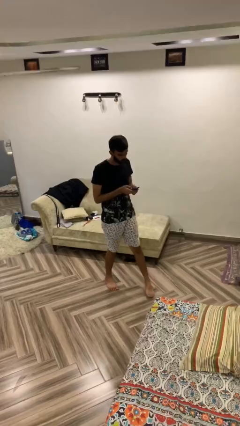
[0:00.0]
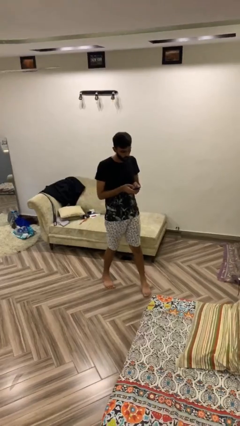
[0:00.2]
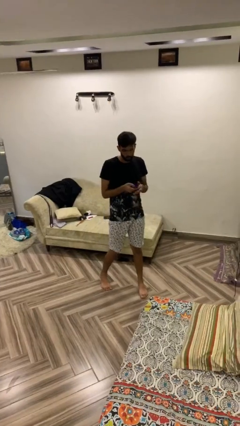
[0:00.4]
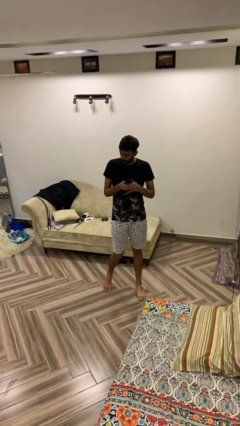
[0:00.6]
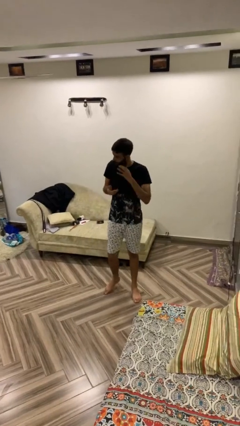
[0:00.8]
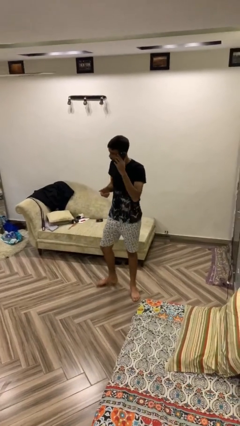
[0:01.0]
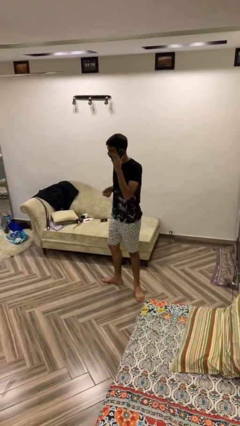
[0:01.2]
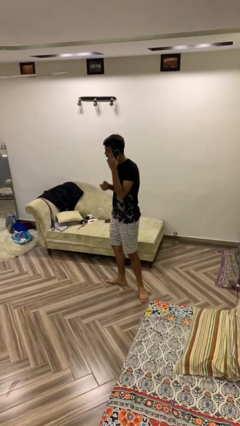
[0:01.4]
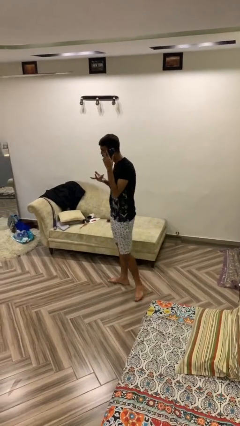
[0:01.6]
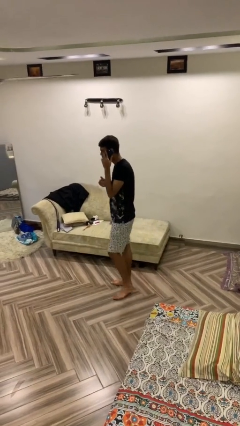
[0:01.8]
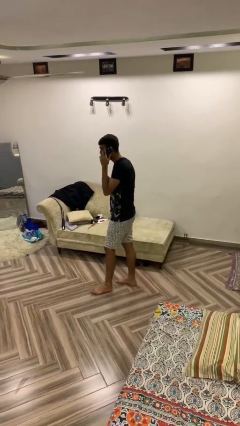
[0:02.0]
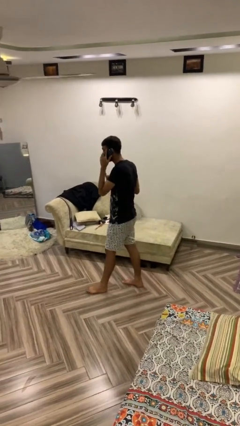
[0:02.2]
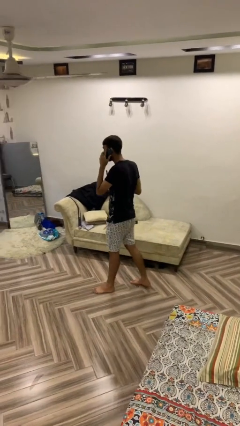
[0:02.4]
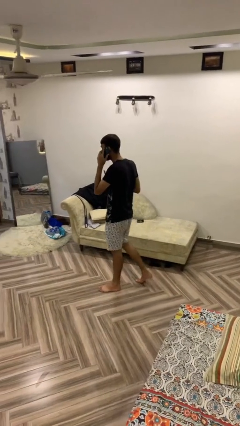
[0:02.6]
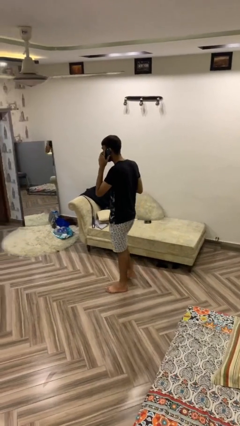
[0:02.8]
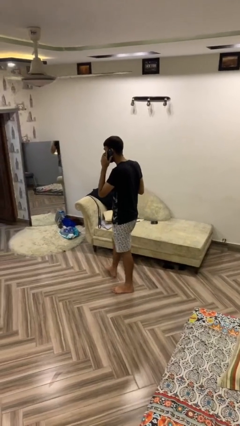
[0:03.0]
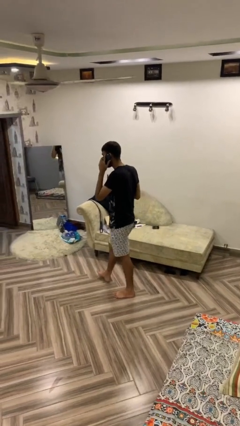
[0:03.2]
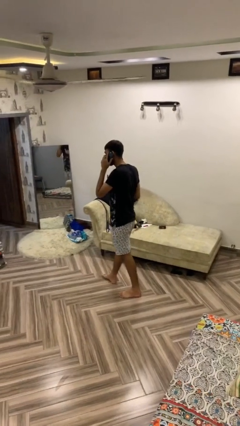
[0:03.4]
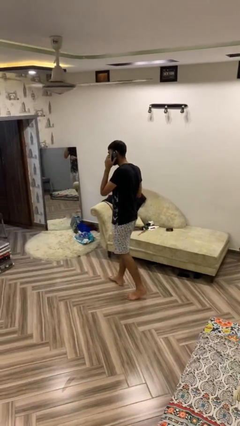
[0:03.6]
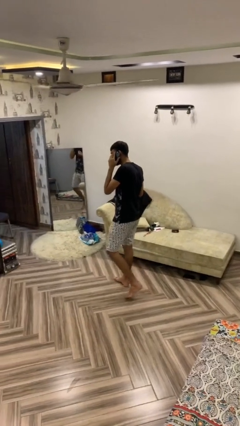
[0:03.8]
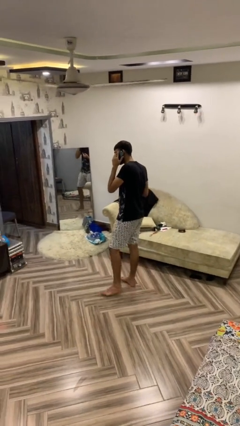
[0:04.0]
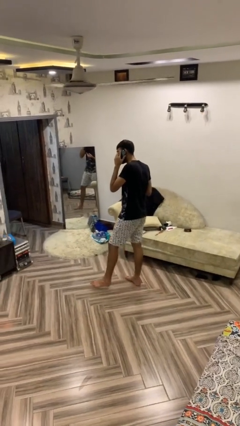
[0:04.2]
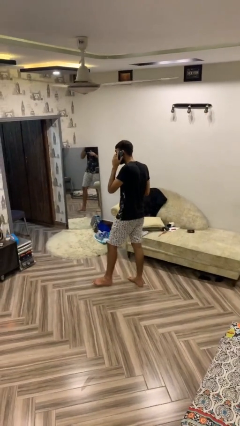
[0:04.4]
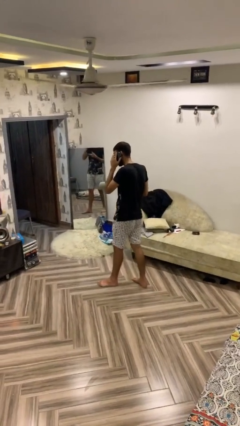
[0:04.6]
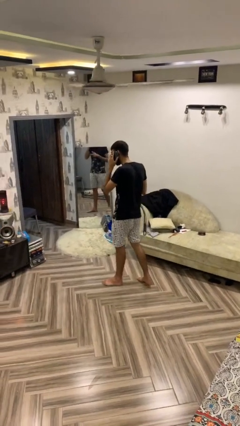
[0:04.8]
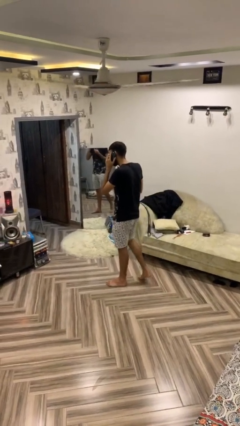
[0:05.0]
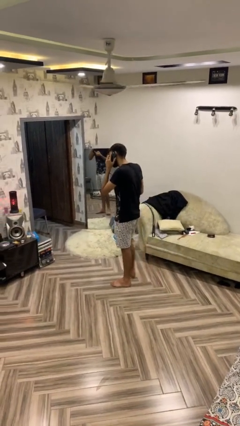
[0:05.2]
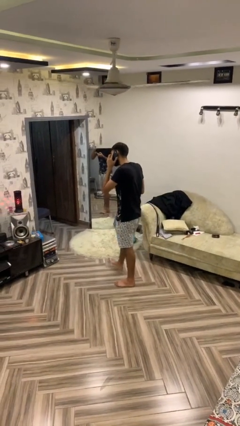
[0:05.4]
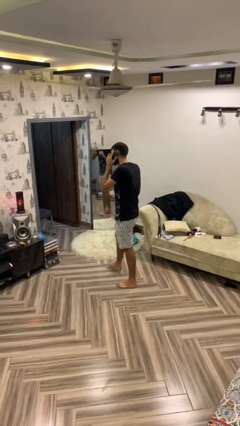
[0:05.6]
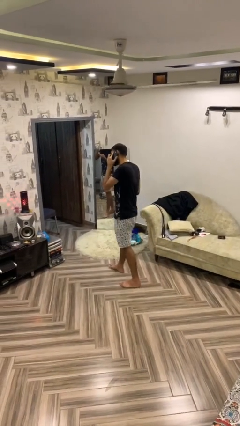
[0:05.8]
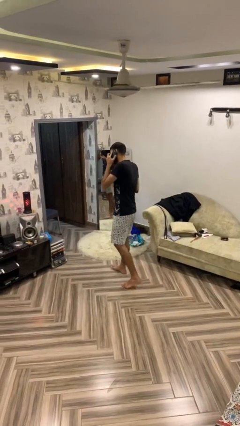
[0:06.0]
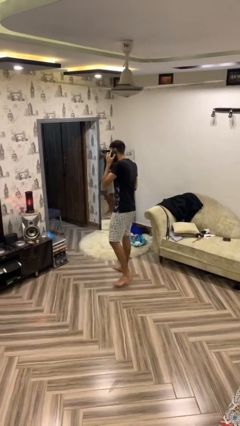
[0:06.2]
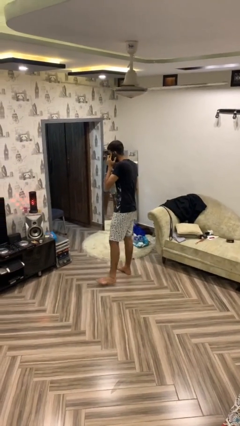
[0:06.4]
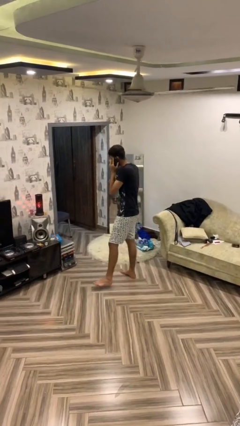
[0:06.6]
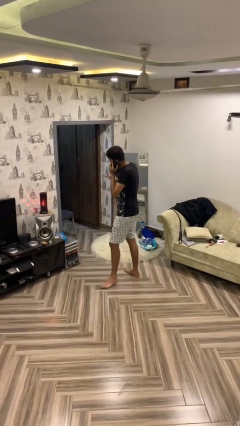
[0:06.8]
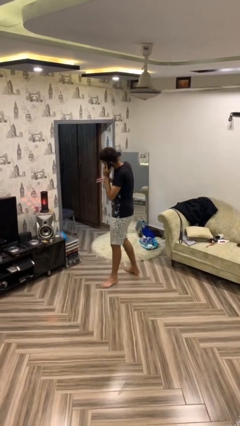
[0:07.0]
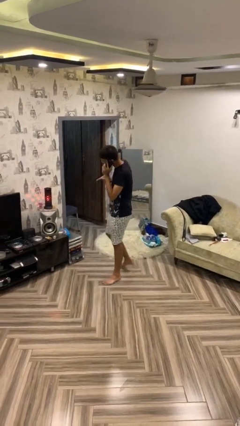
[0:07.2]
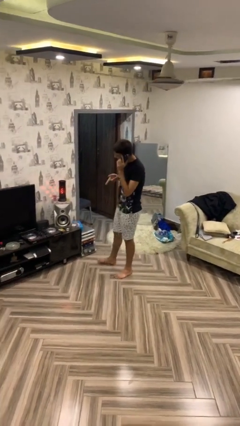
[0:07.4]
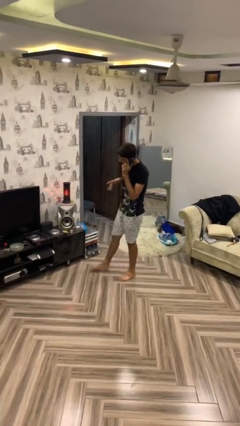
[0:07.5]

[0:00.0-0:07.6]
person talks on phone

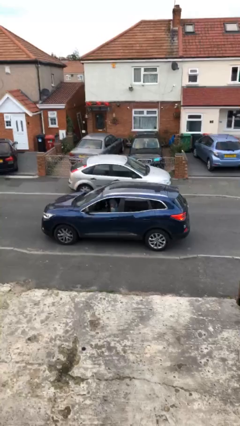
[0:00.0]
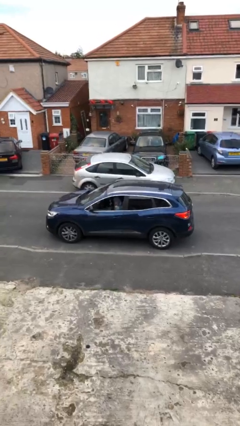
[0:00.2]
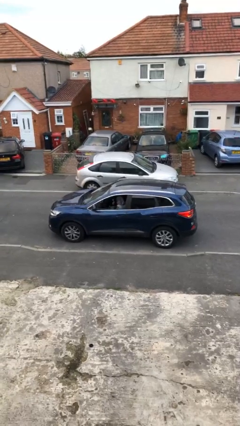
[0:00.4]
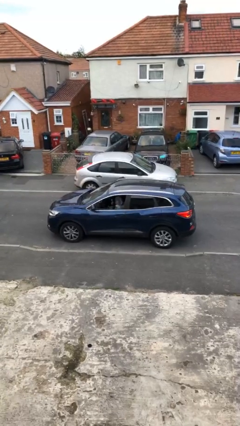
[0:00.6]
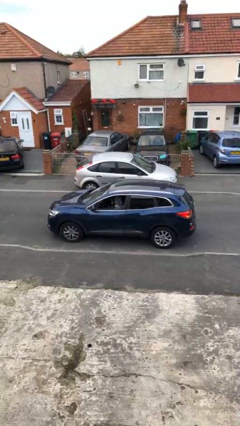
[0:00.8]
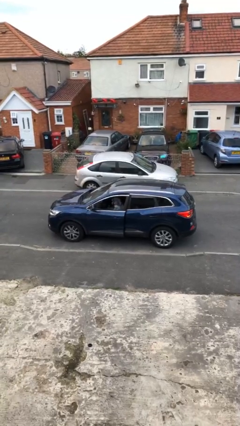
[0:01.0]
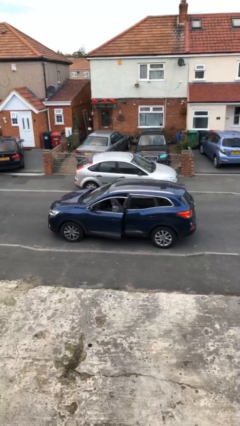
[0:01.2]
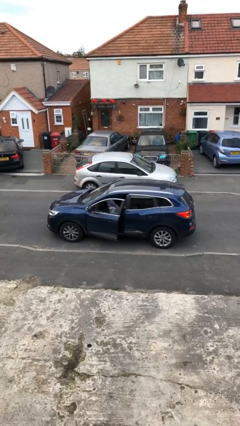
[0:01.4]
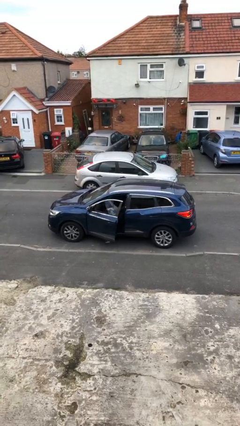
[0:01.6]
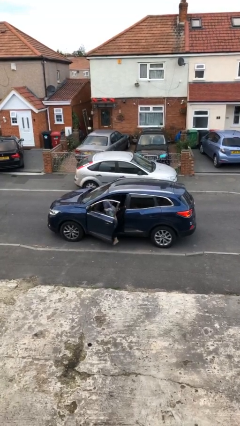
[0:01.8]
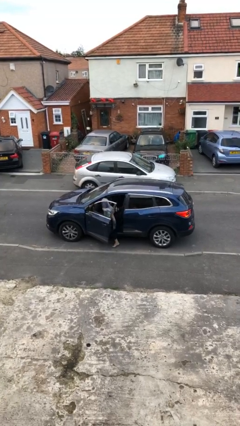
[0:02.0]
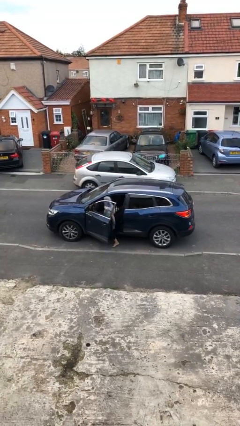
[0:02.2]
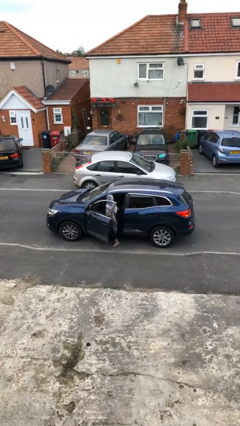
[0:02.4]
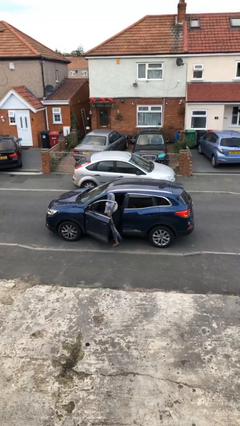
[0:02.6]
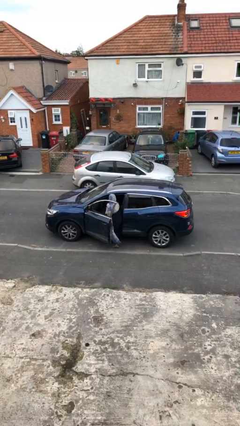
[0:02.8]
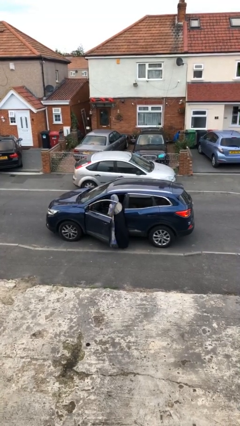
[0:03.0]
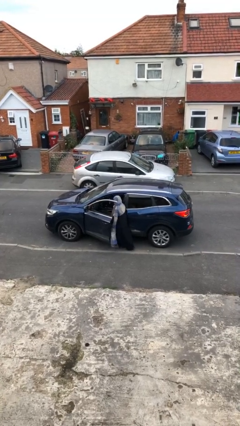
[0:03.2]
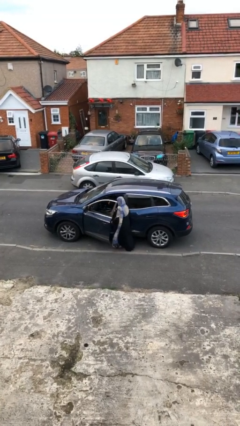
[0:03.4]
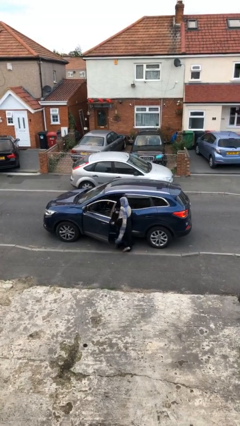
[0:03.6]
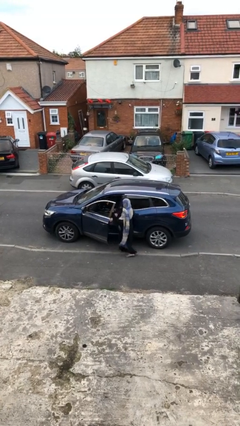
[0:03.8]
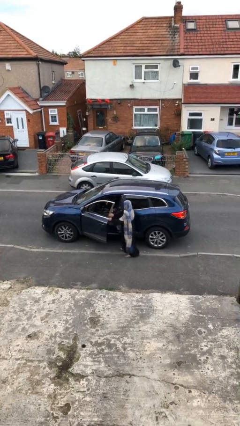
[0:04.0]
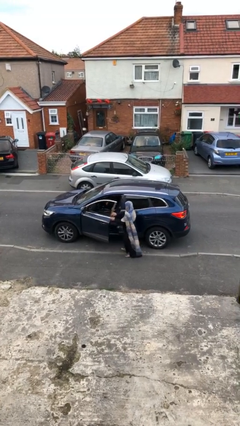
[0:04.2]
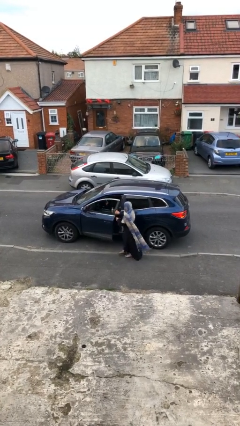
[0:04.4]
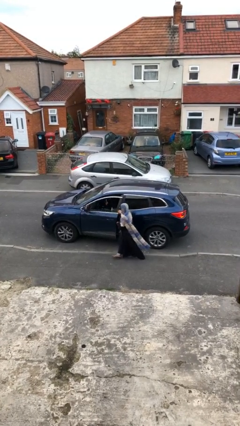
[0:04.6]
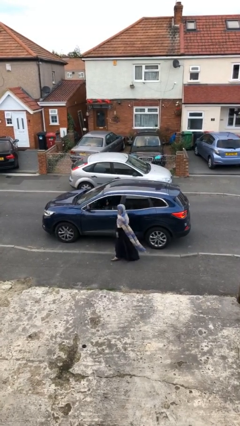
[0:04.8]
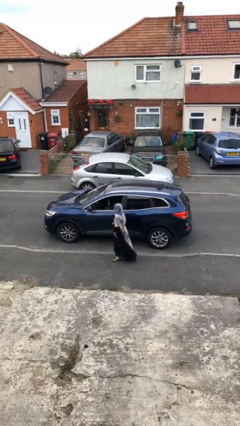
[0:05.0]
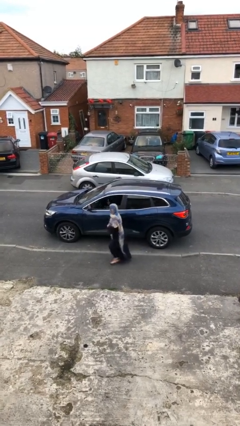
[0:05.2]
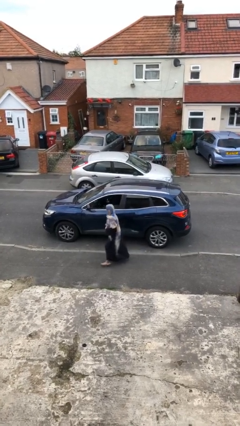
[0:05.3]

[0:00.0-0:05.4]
car drops off person

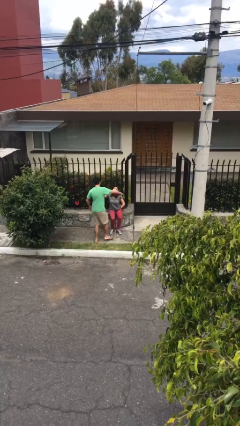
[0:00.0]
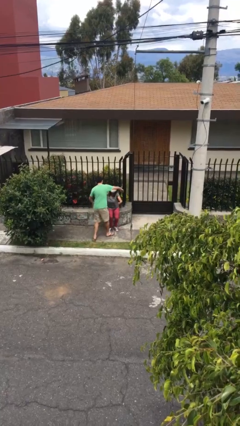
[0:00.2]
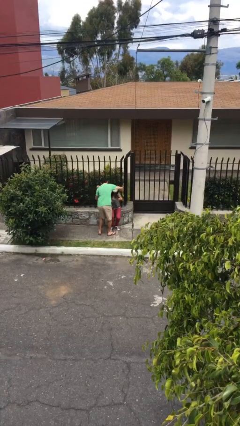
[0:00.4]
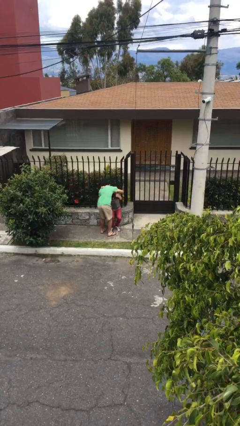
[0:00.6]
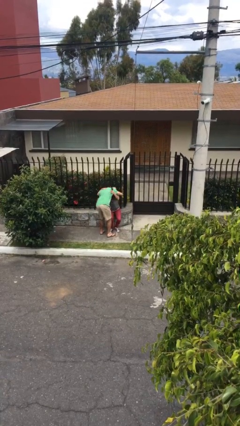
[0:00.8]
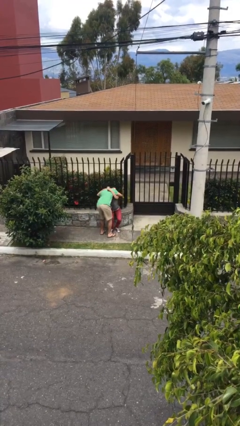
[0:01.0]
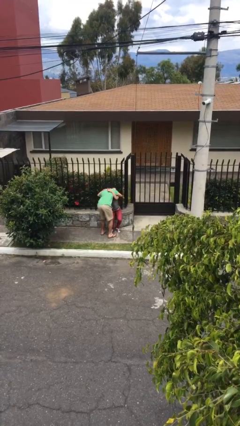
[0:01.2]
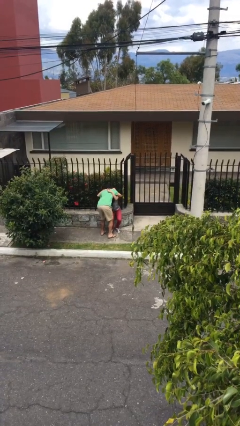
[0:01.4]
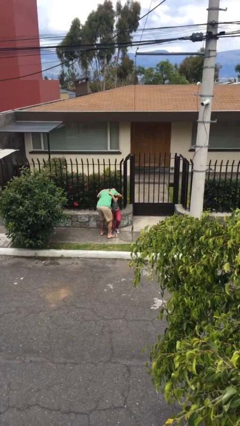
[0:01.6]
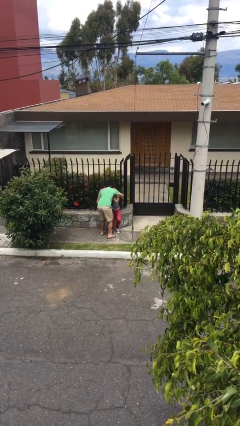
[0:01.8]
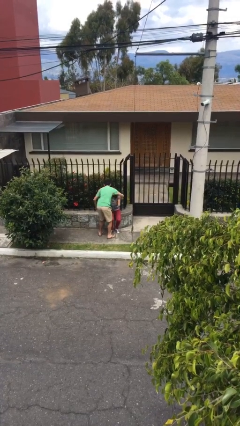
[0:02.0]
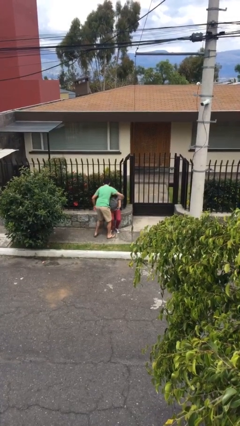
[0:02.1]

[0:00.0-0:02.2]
person embraces person

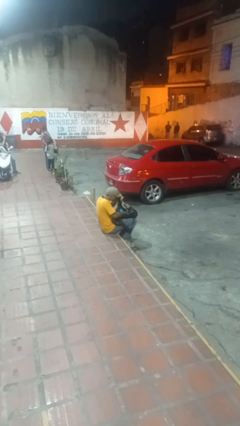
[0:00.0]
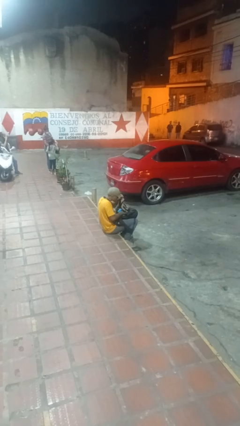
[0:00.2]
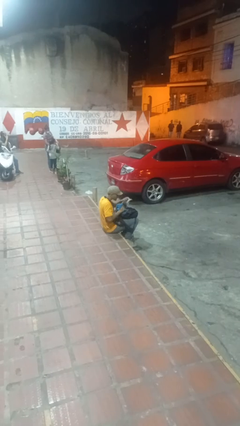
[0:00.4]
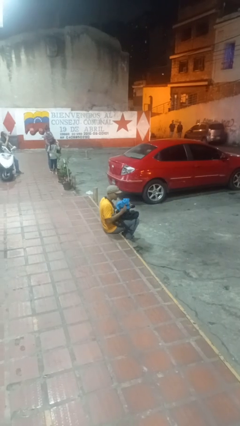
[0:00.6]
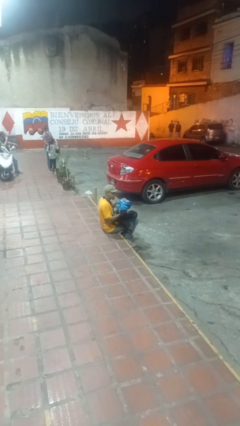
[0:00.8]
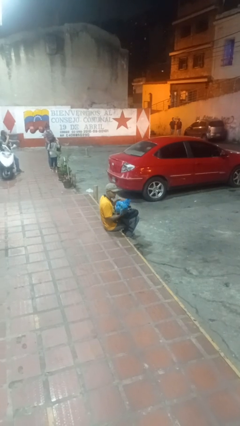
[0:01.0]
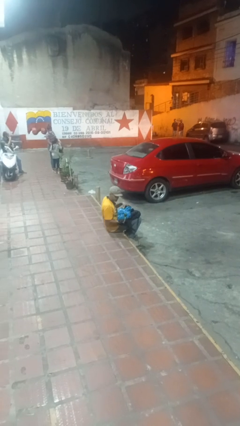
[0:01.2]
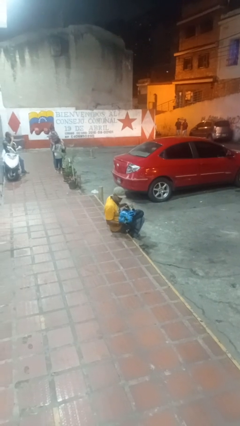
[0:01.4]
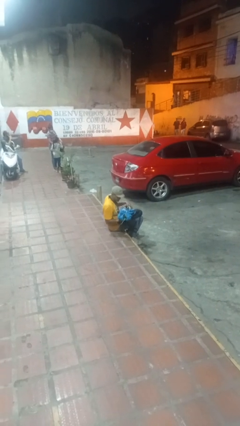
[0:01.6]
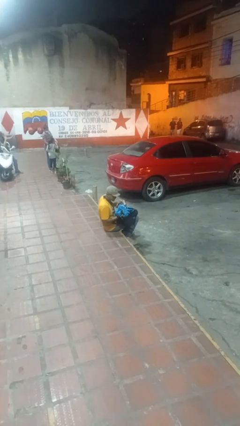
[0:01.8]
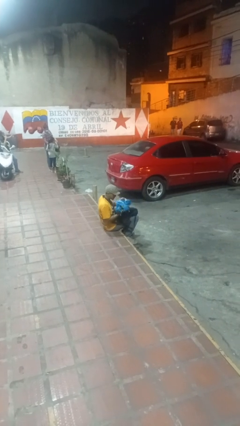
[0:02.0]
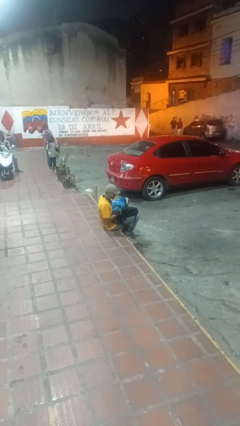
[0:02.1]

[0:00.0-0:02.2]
person takes object from backpack
